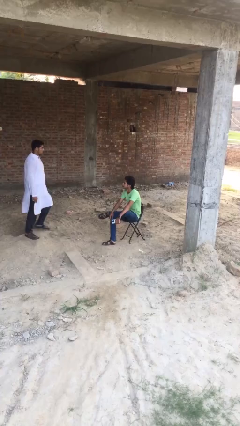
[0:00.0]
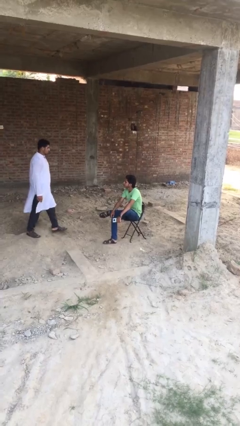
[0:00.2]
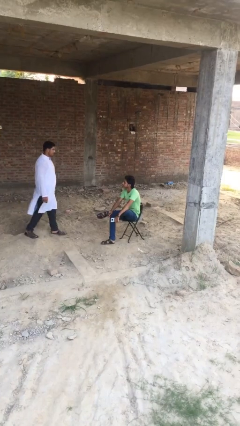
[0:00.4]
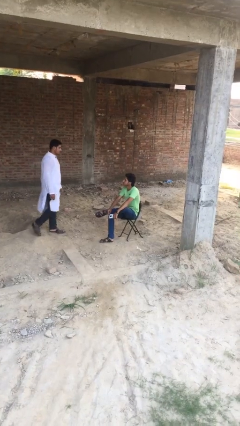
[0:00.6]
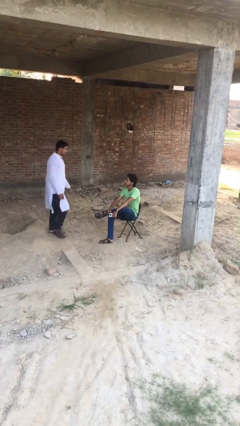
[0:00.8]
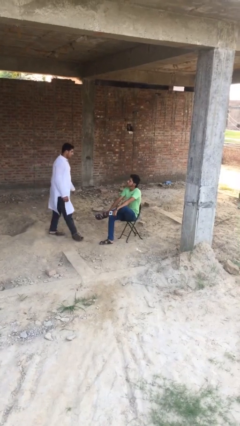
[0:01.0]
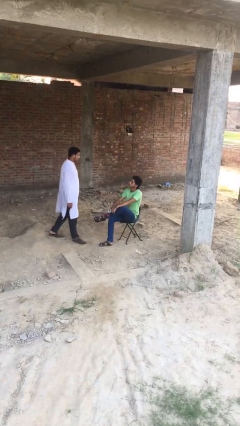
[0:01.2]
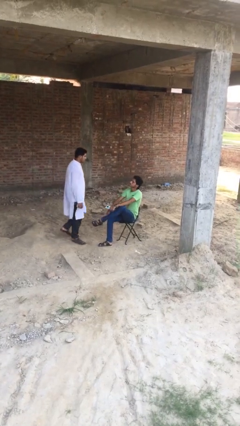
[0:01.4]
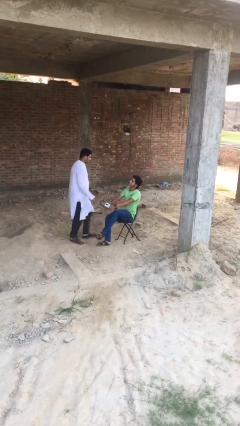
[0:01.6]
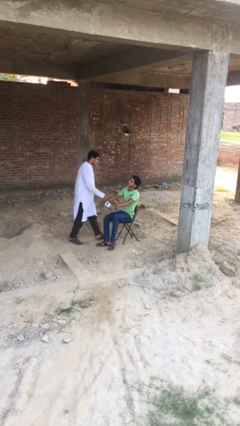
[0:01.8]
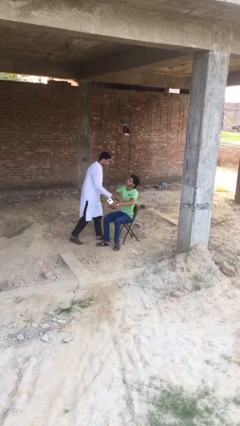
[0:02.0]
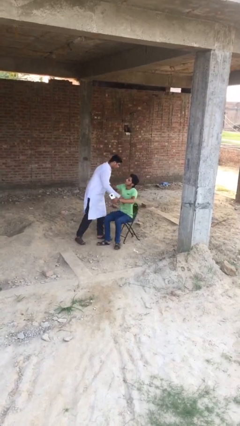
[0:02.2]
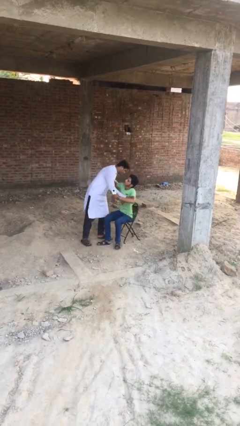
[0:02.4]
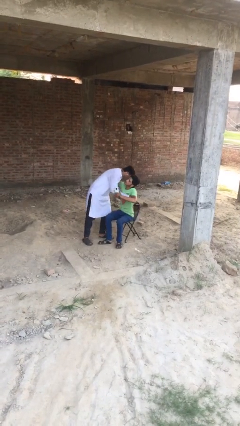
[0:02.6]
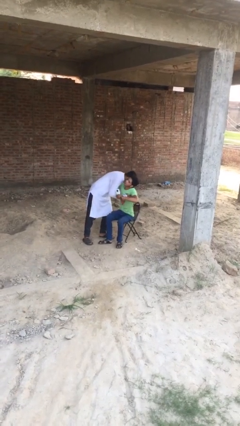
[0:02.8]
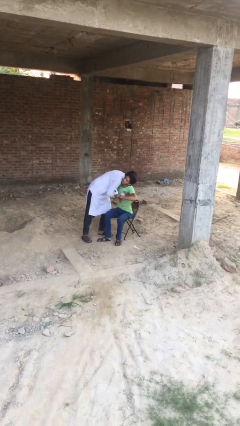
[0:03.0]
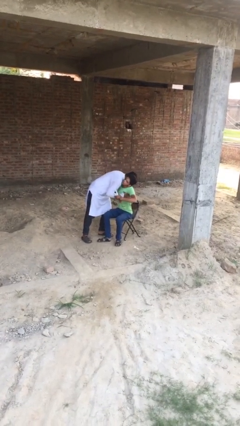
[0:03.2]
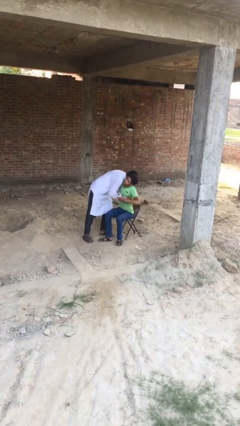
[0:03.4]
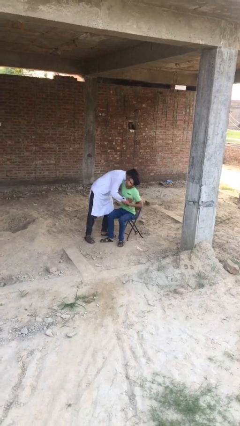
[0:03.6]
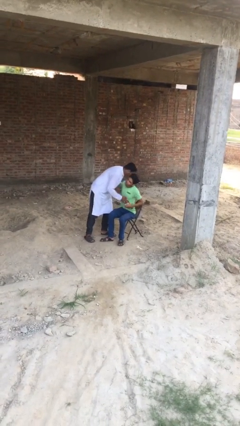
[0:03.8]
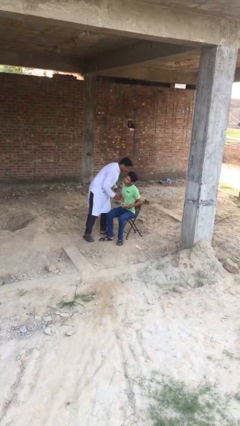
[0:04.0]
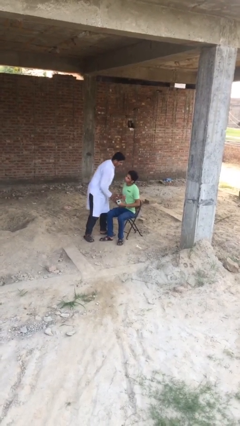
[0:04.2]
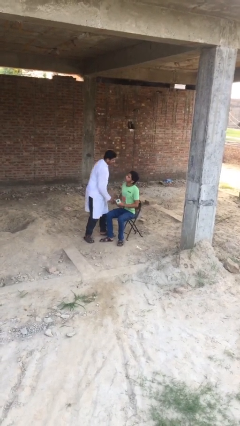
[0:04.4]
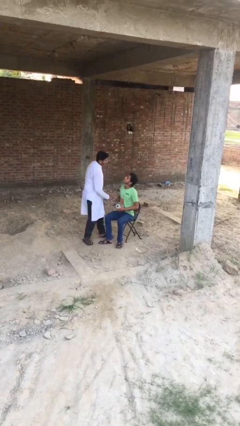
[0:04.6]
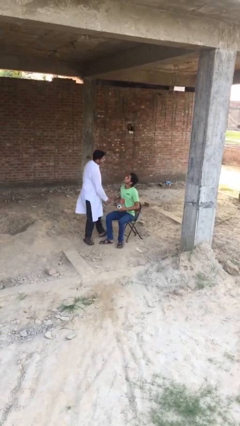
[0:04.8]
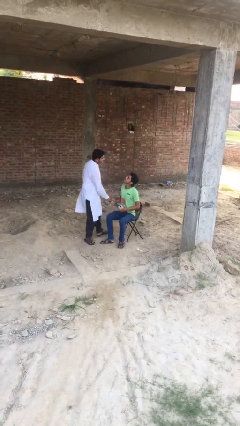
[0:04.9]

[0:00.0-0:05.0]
person embraces person

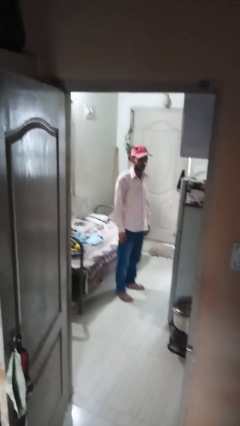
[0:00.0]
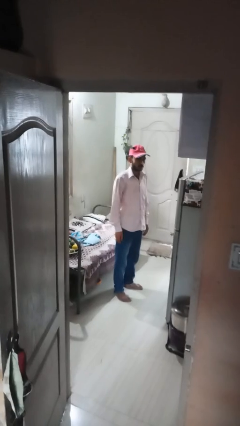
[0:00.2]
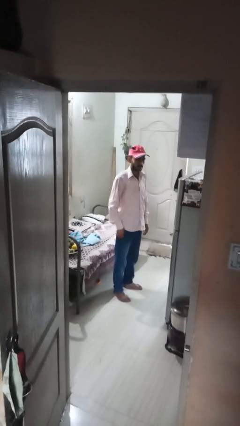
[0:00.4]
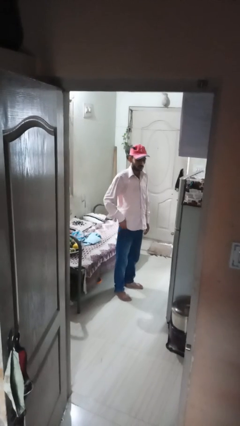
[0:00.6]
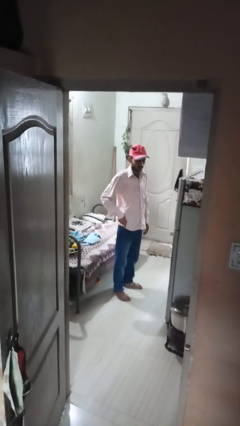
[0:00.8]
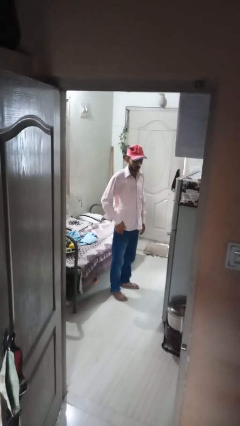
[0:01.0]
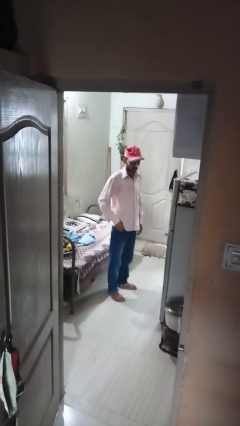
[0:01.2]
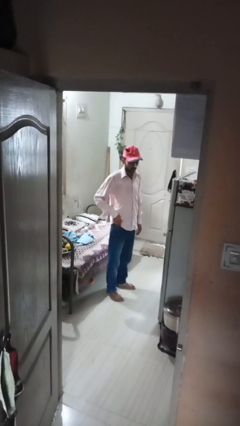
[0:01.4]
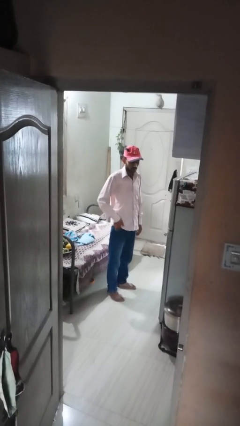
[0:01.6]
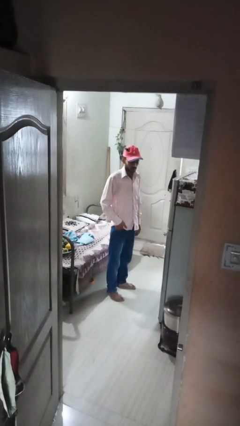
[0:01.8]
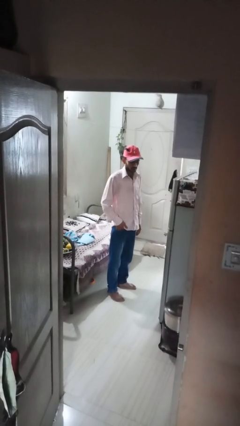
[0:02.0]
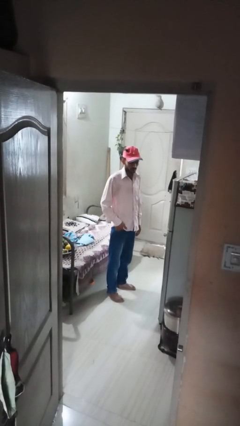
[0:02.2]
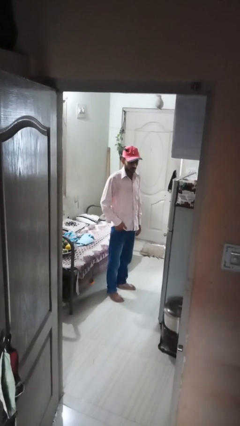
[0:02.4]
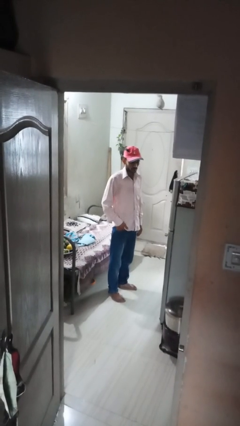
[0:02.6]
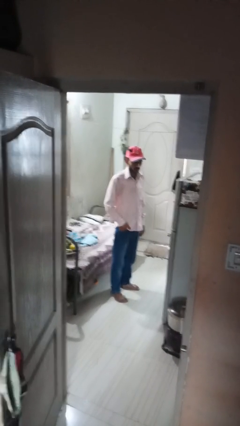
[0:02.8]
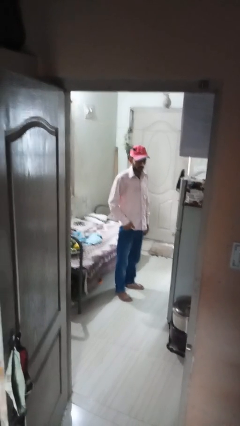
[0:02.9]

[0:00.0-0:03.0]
person puts hands in back pockets

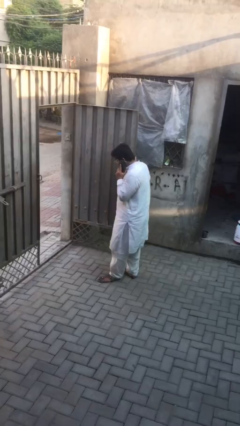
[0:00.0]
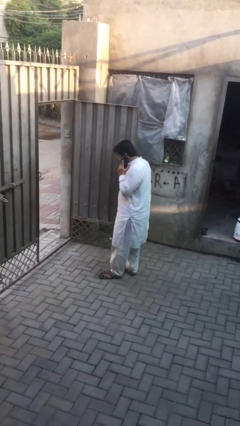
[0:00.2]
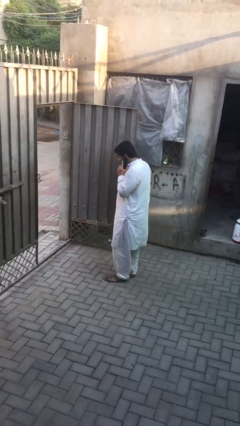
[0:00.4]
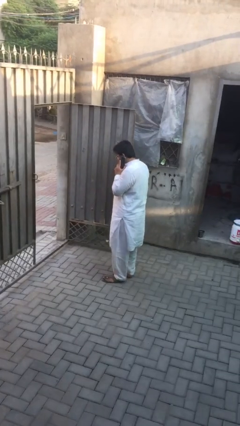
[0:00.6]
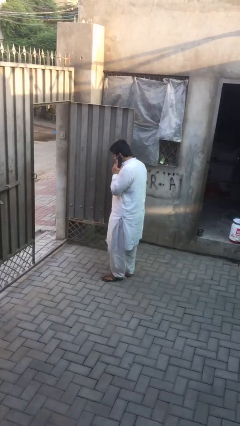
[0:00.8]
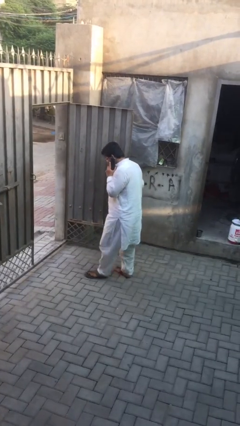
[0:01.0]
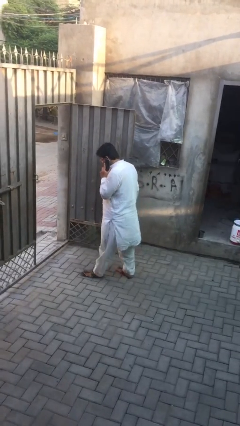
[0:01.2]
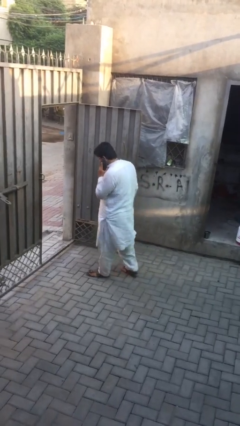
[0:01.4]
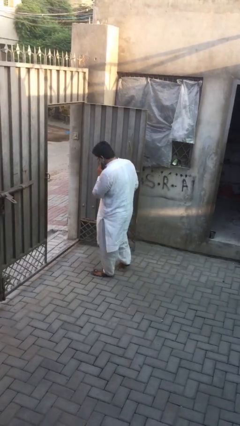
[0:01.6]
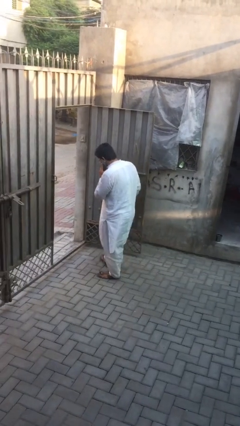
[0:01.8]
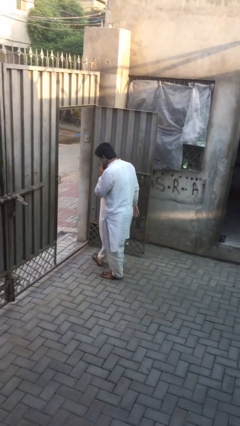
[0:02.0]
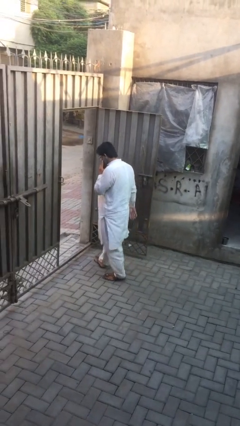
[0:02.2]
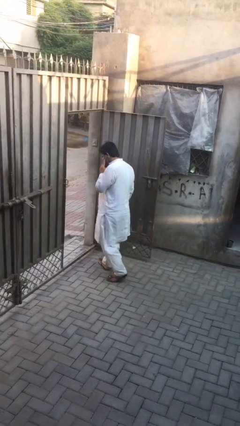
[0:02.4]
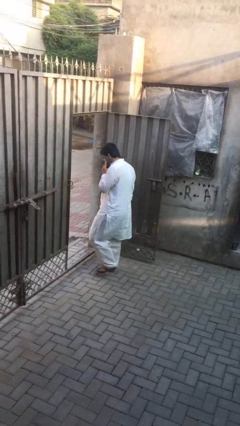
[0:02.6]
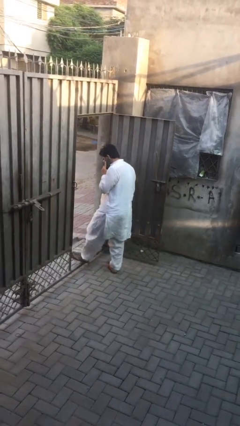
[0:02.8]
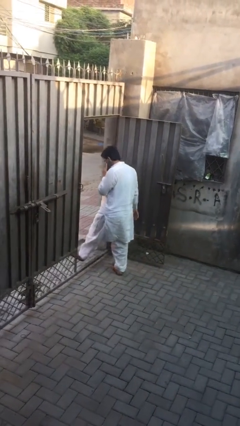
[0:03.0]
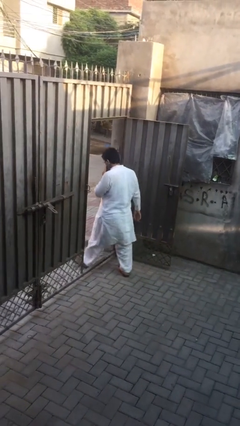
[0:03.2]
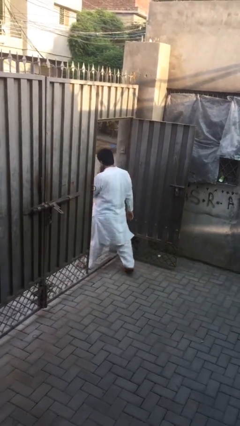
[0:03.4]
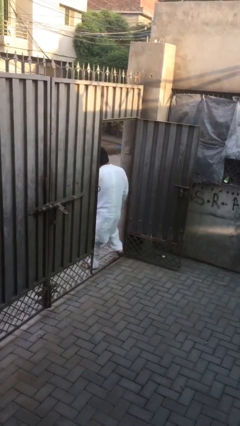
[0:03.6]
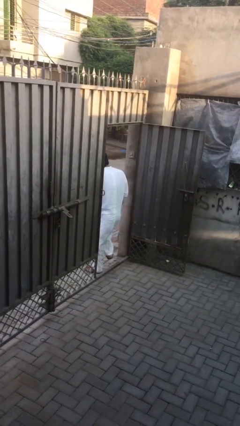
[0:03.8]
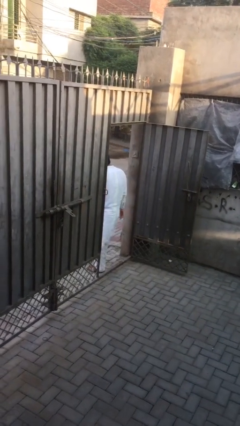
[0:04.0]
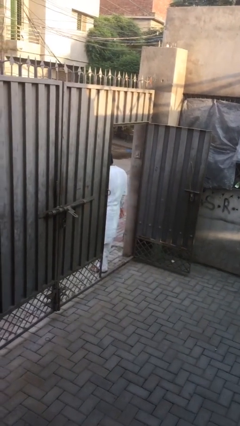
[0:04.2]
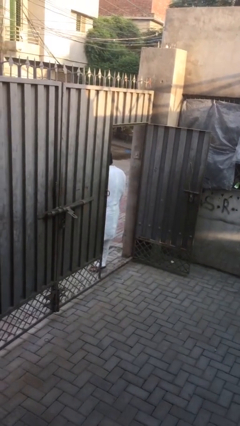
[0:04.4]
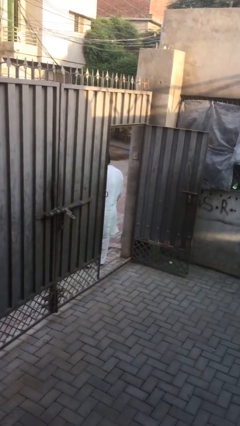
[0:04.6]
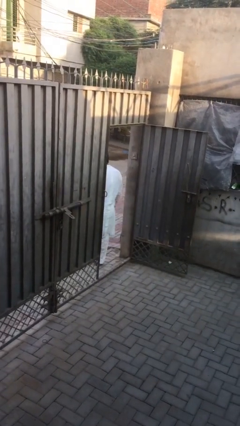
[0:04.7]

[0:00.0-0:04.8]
person exits scene through structure

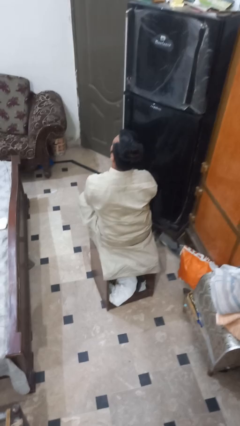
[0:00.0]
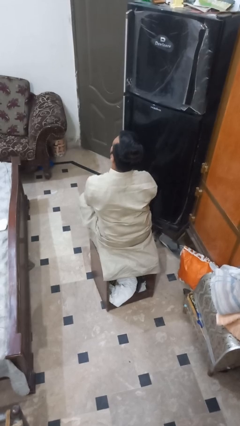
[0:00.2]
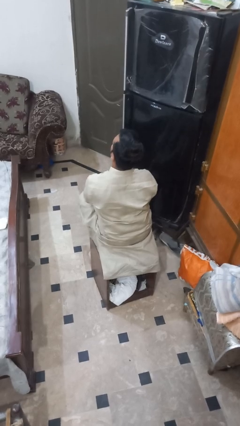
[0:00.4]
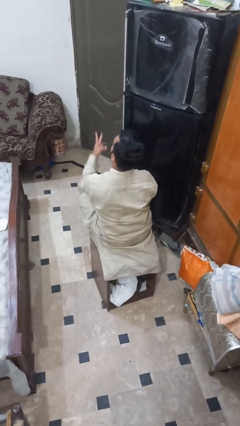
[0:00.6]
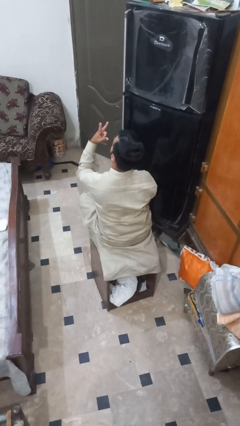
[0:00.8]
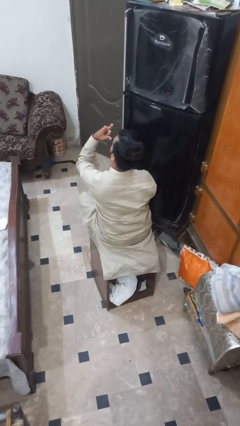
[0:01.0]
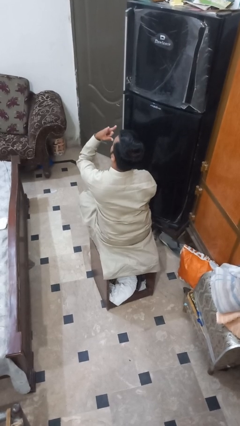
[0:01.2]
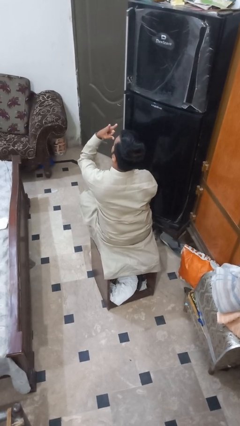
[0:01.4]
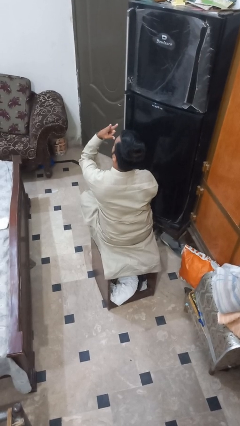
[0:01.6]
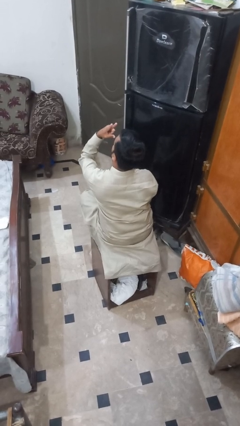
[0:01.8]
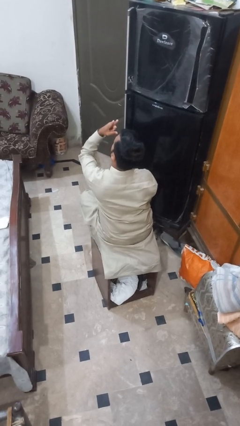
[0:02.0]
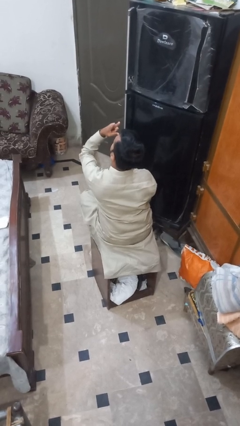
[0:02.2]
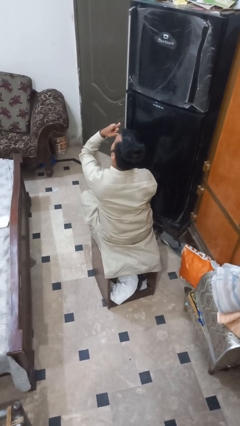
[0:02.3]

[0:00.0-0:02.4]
person gestures watch closely

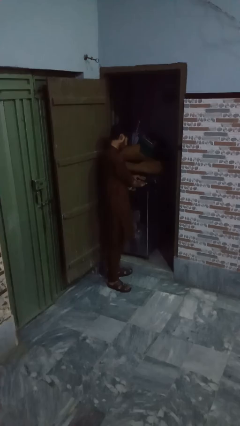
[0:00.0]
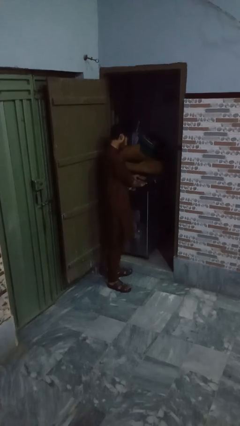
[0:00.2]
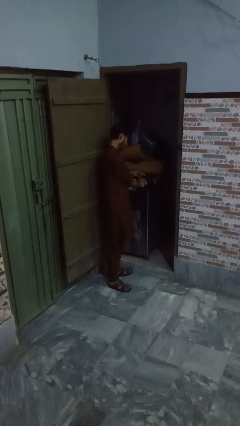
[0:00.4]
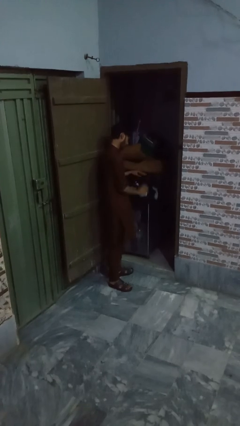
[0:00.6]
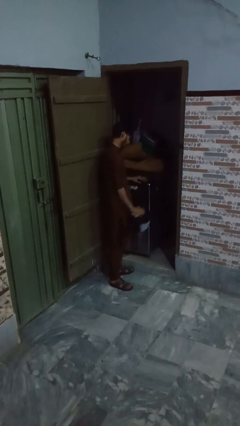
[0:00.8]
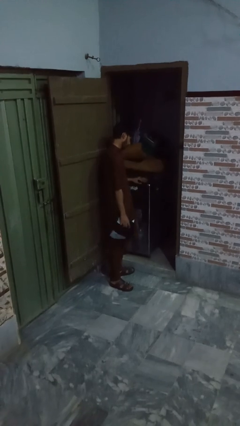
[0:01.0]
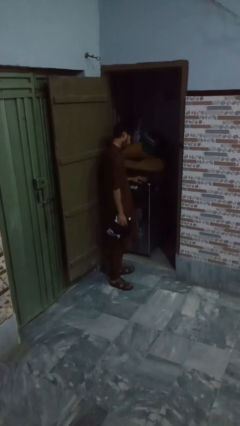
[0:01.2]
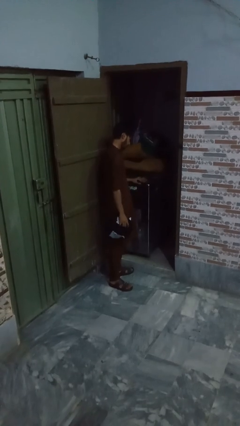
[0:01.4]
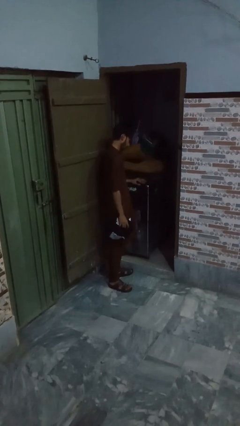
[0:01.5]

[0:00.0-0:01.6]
person unloads dryer

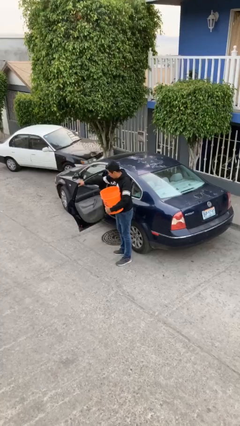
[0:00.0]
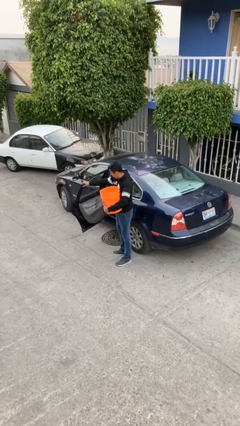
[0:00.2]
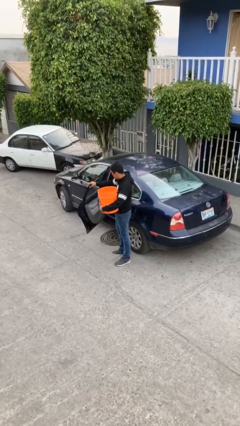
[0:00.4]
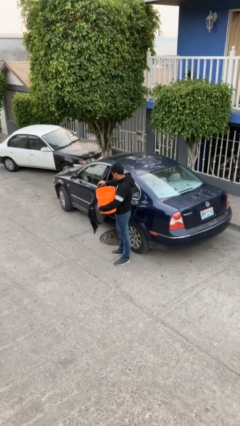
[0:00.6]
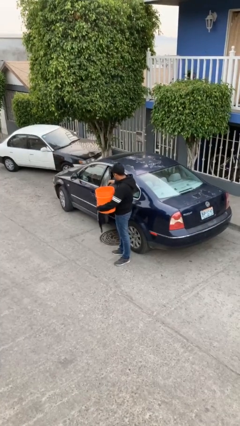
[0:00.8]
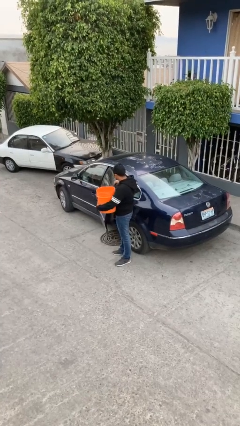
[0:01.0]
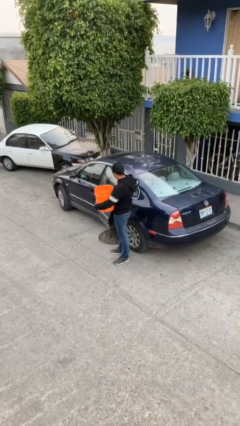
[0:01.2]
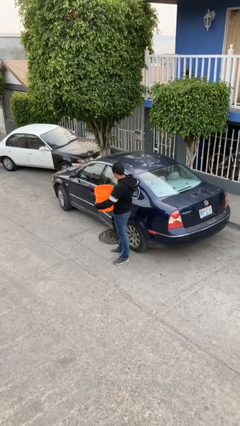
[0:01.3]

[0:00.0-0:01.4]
person closes car door
